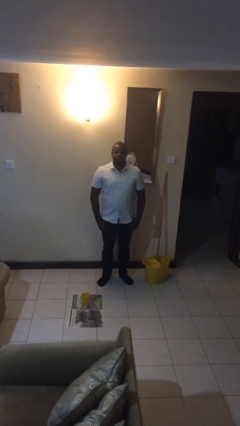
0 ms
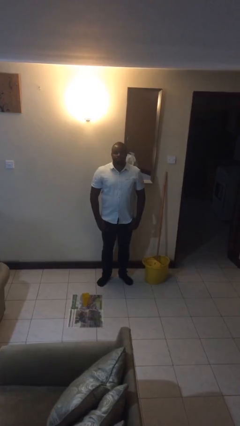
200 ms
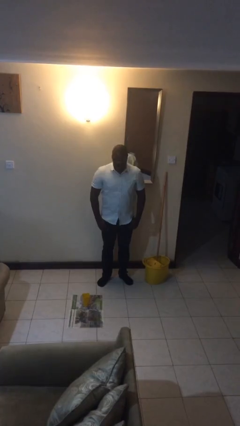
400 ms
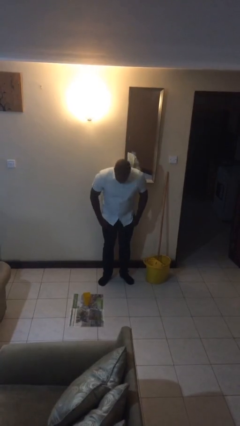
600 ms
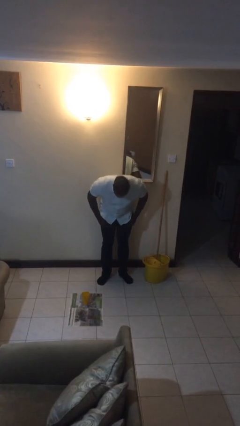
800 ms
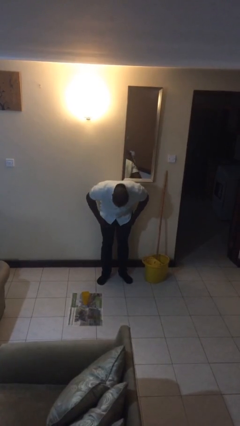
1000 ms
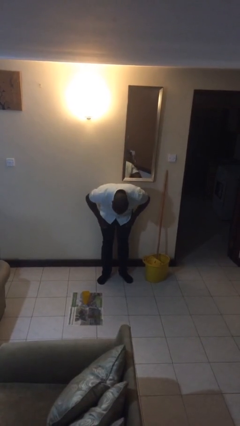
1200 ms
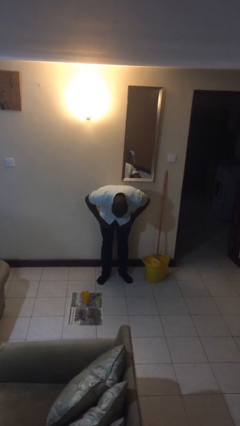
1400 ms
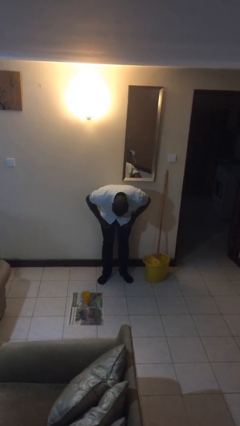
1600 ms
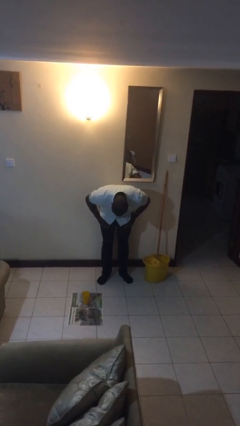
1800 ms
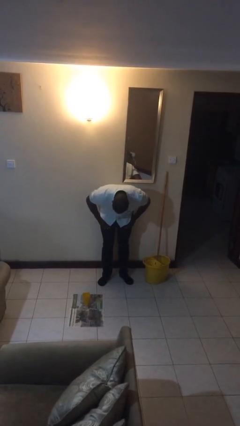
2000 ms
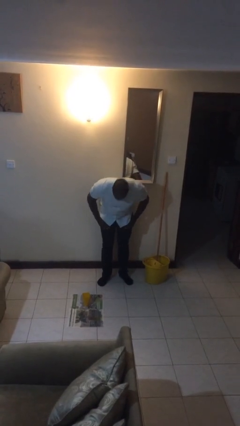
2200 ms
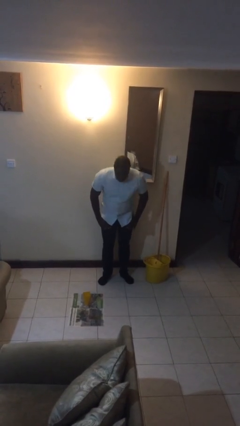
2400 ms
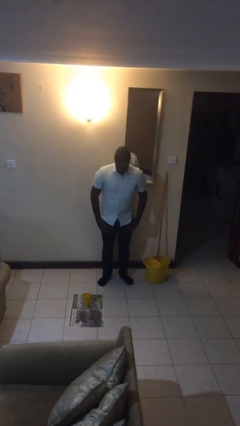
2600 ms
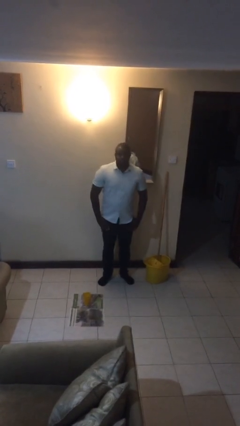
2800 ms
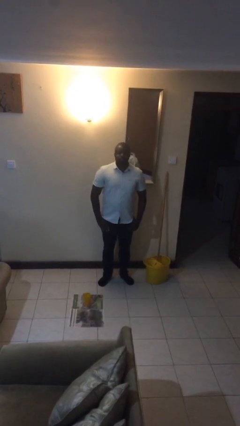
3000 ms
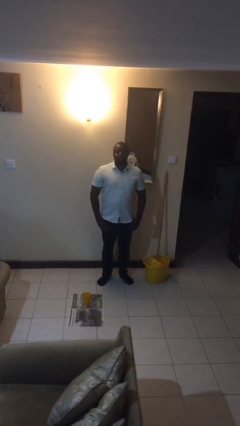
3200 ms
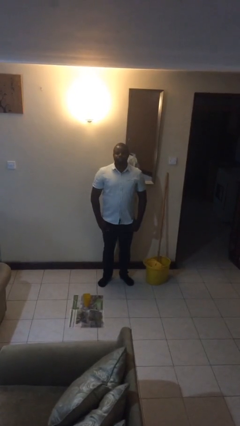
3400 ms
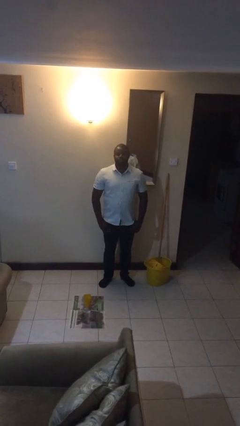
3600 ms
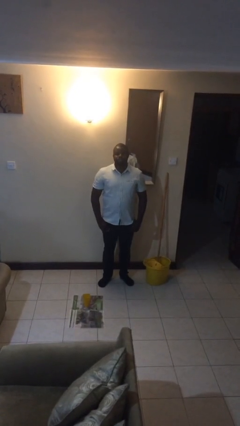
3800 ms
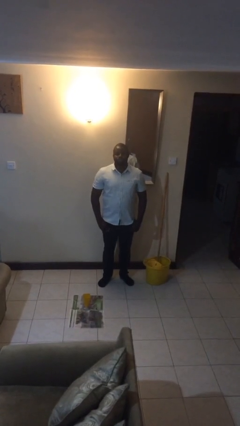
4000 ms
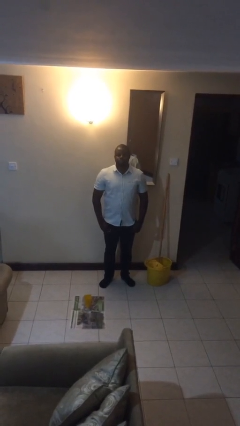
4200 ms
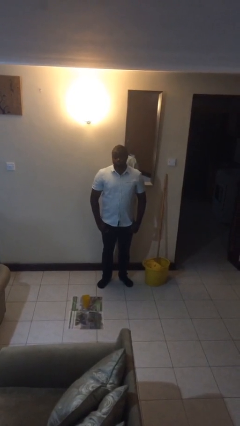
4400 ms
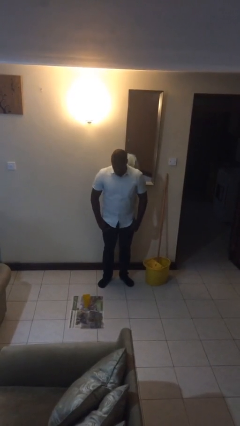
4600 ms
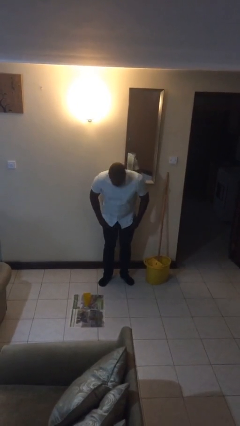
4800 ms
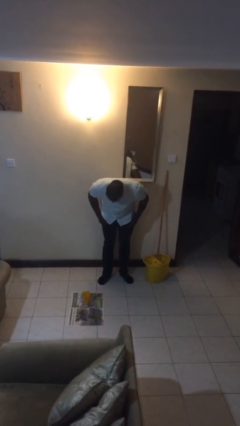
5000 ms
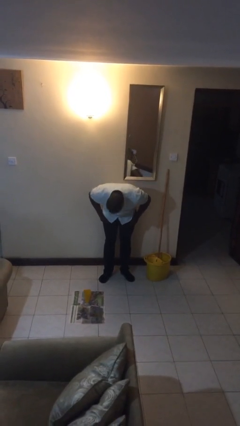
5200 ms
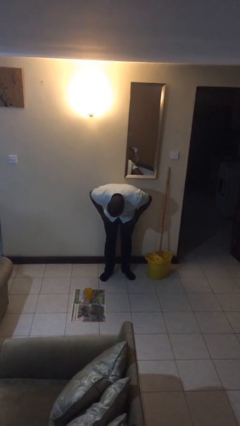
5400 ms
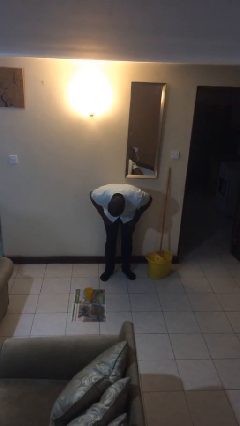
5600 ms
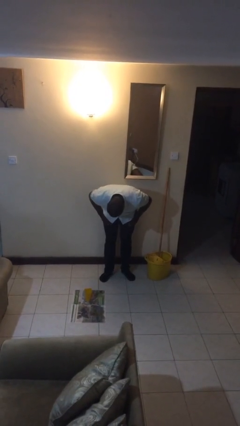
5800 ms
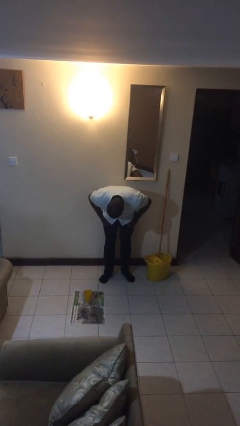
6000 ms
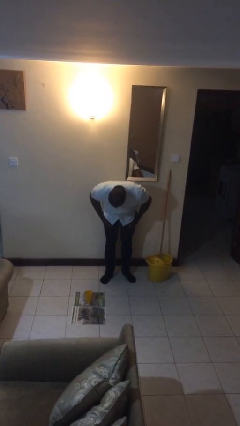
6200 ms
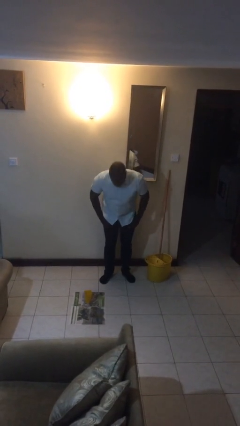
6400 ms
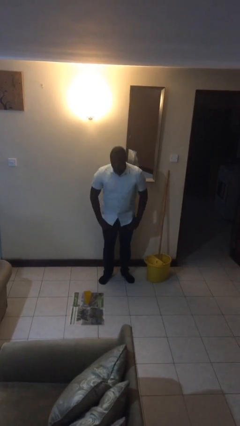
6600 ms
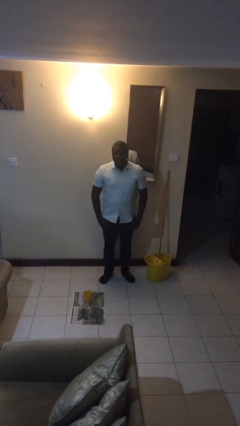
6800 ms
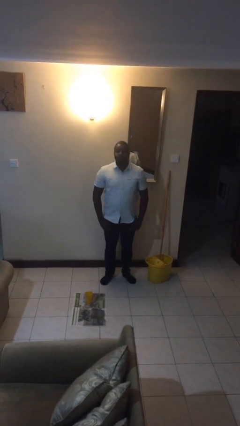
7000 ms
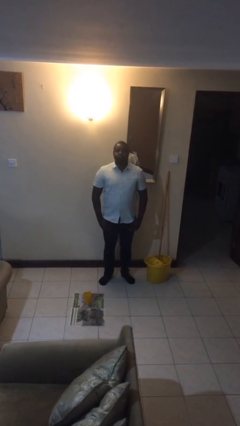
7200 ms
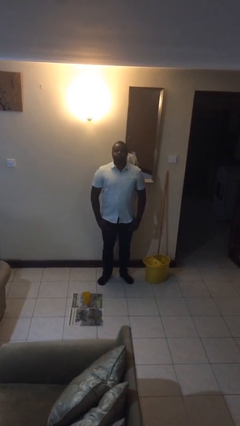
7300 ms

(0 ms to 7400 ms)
person bows

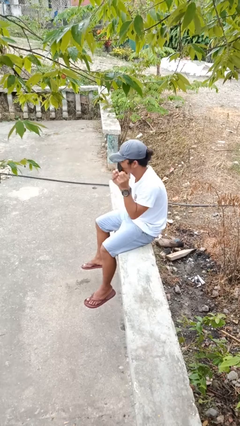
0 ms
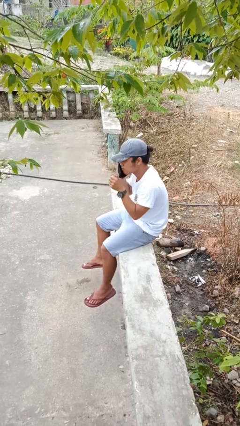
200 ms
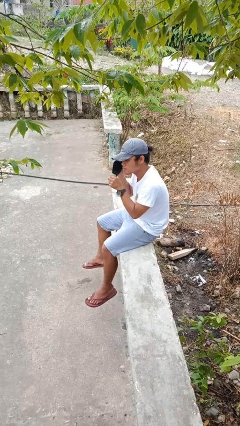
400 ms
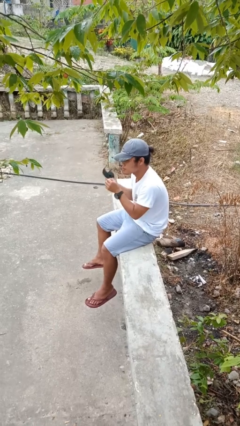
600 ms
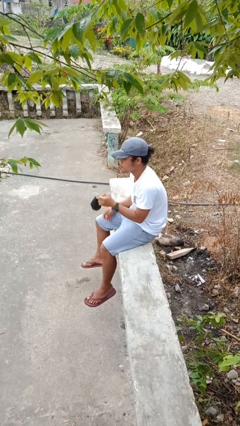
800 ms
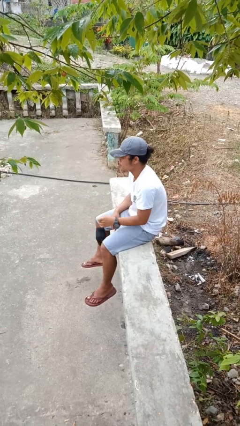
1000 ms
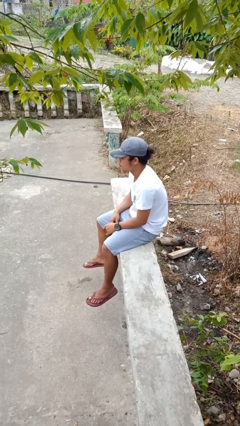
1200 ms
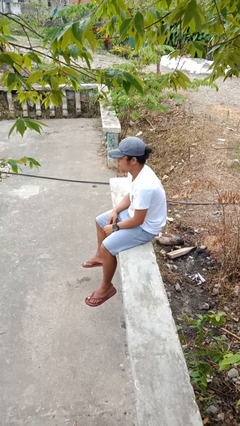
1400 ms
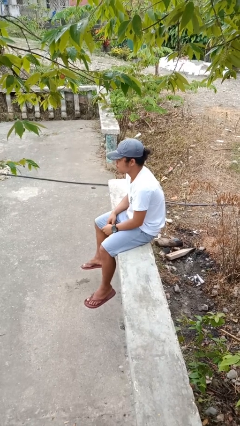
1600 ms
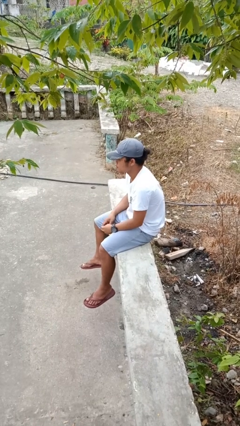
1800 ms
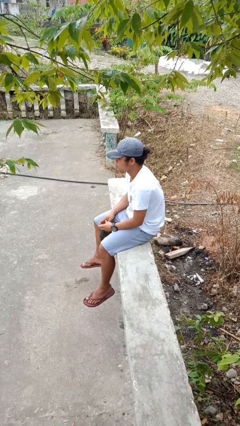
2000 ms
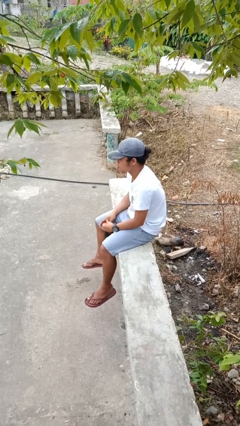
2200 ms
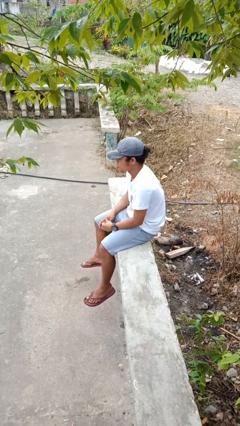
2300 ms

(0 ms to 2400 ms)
person takes off facemask

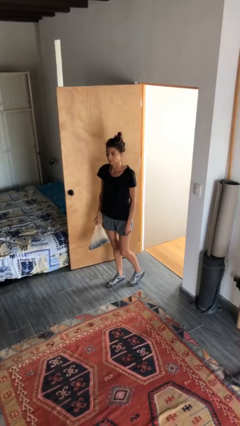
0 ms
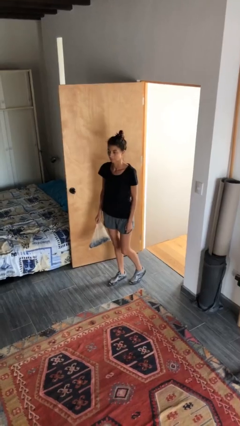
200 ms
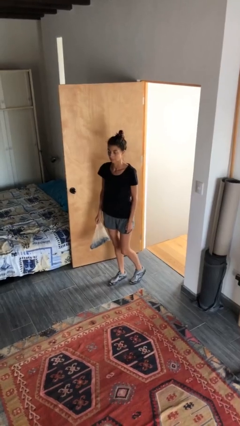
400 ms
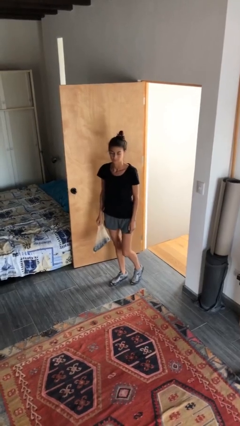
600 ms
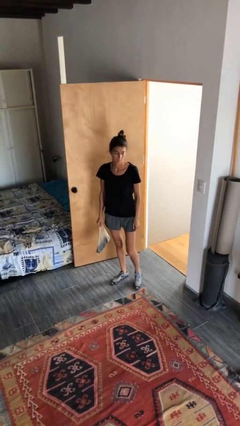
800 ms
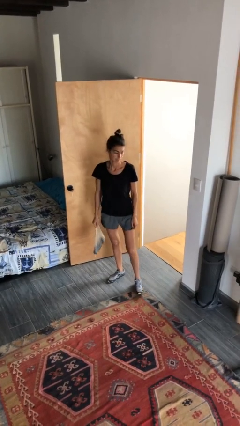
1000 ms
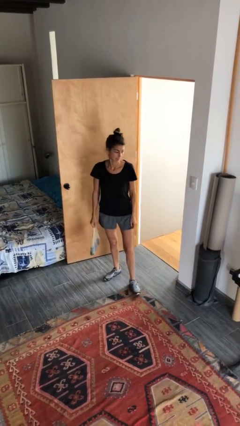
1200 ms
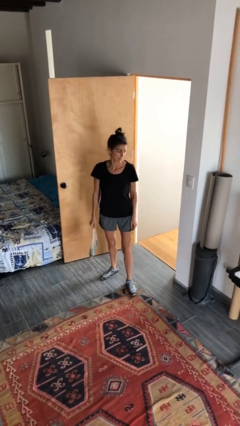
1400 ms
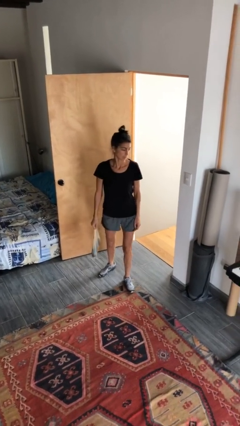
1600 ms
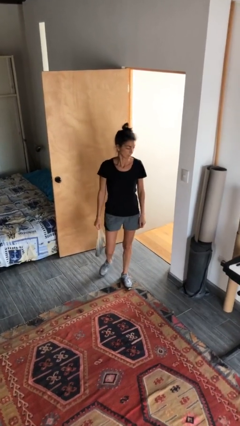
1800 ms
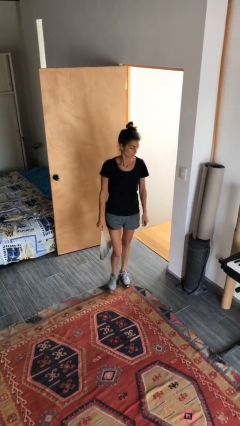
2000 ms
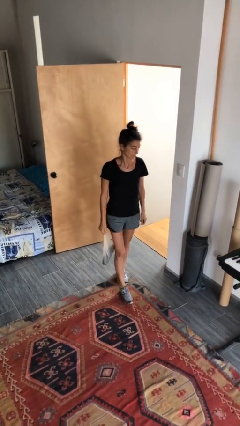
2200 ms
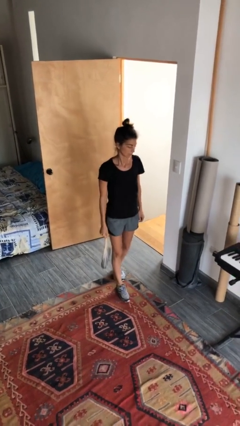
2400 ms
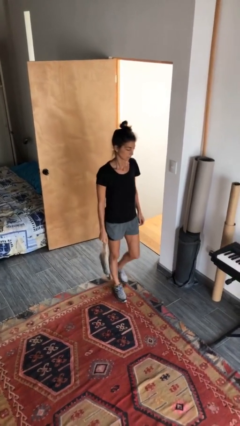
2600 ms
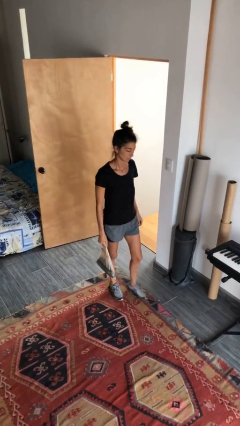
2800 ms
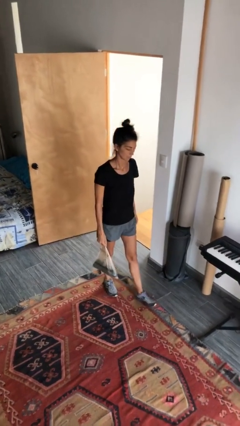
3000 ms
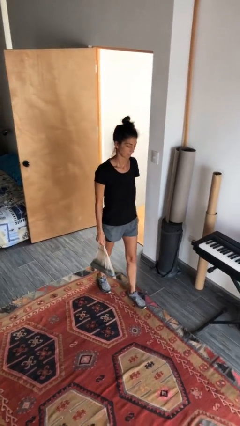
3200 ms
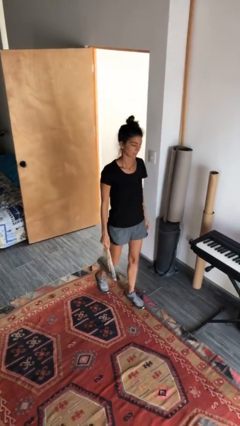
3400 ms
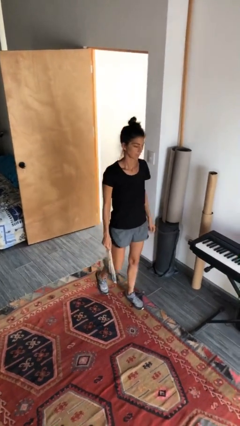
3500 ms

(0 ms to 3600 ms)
person carries groceries

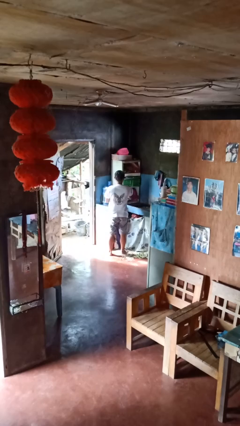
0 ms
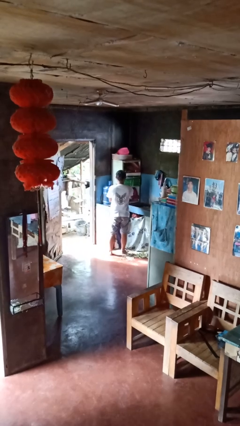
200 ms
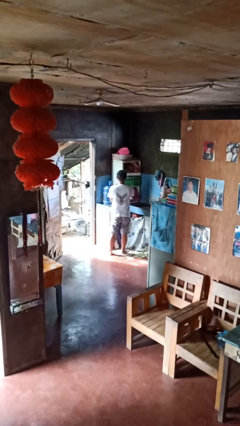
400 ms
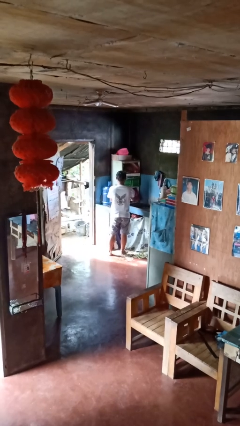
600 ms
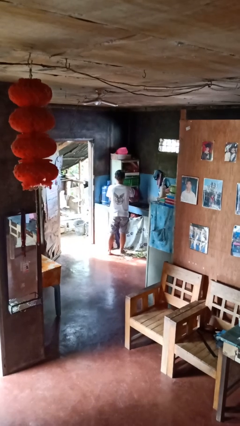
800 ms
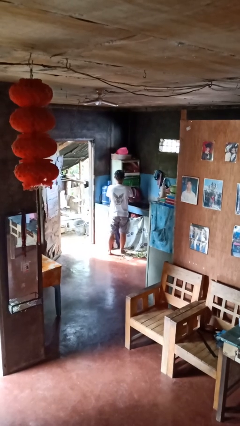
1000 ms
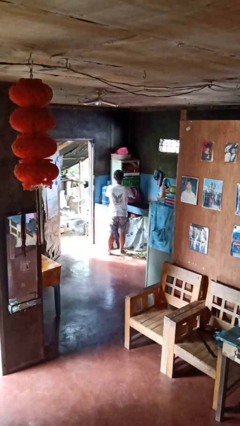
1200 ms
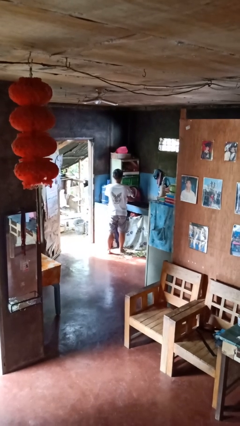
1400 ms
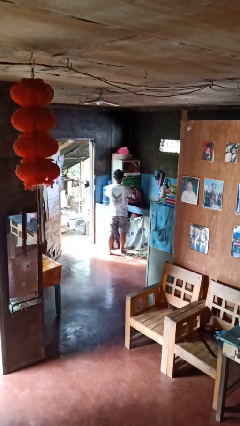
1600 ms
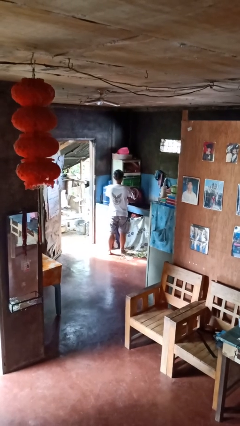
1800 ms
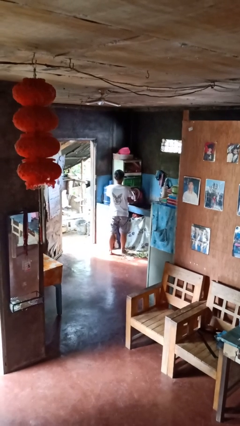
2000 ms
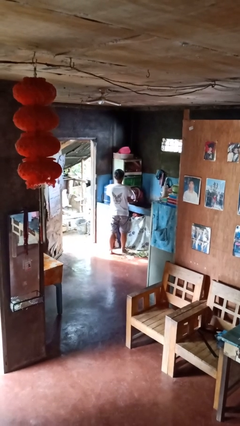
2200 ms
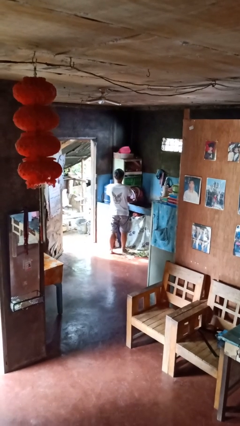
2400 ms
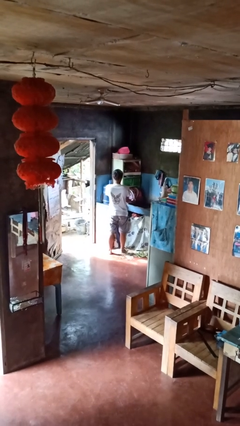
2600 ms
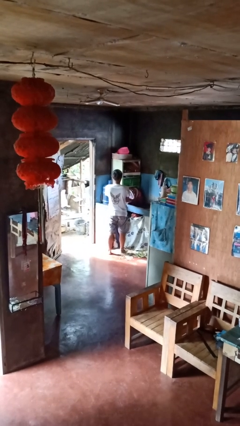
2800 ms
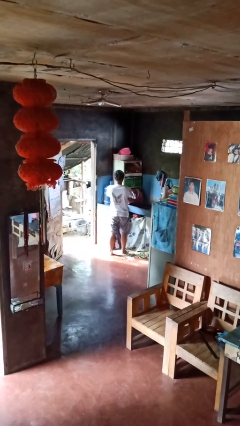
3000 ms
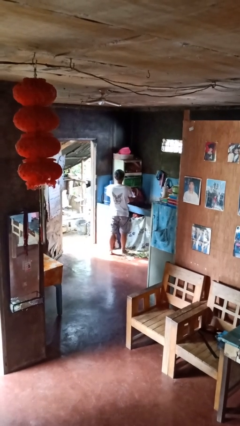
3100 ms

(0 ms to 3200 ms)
person opens dishwasher

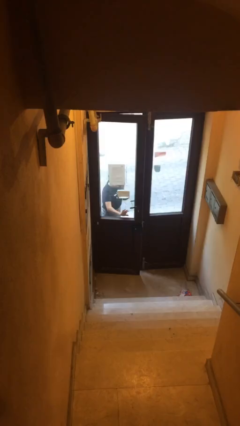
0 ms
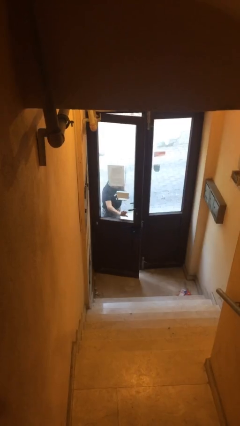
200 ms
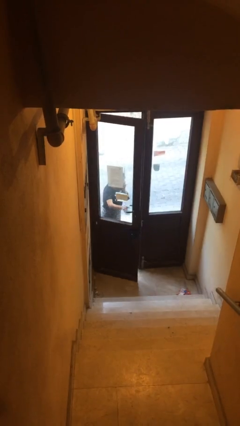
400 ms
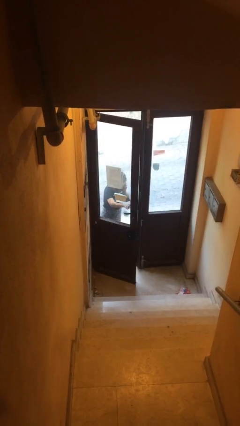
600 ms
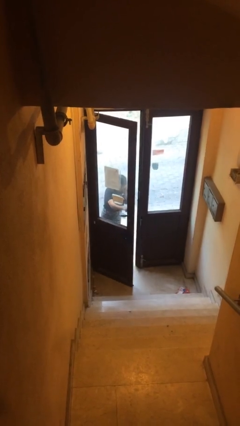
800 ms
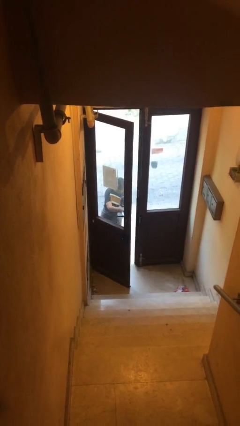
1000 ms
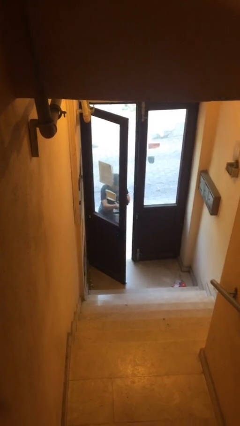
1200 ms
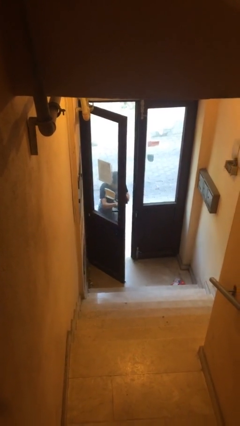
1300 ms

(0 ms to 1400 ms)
person opens facility door
